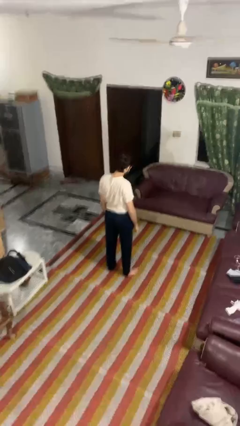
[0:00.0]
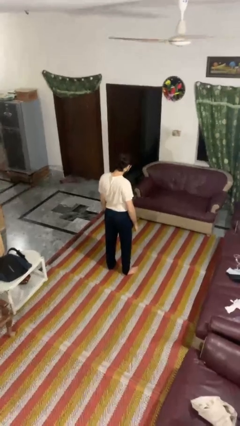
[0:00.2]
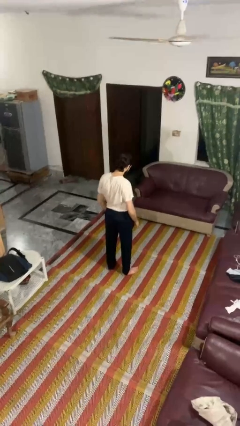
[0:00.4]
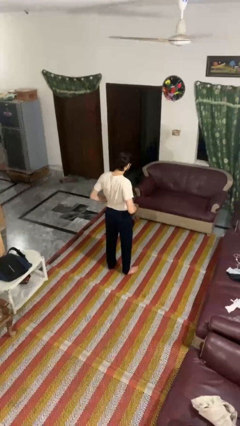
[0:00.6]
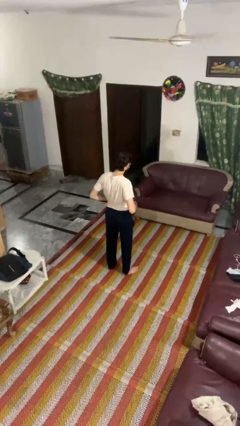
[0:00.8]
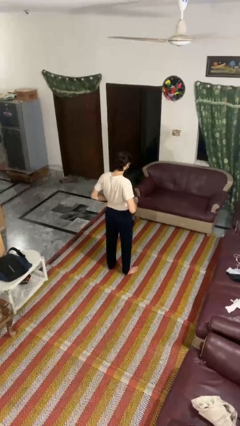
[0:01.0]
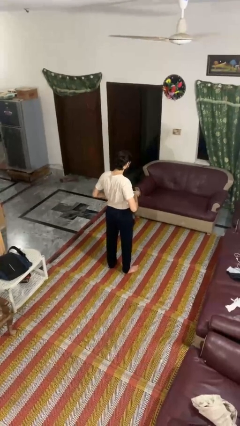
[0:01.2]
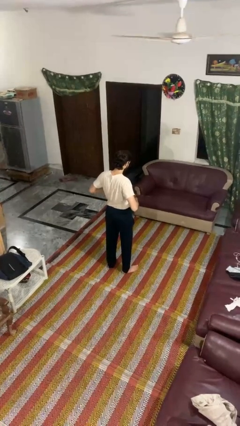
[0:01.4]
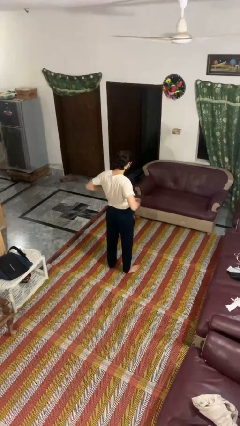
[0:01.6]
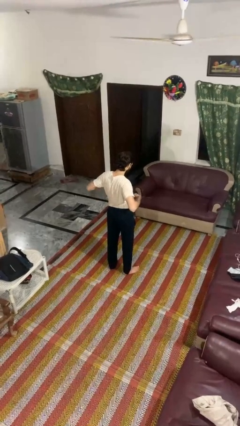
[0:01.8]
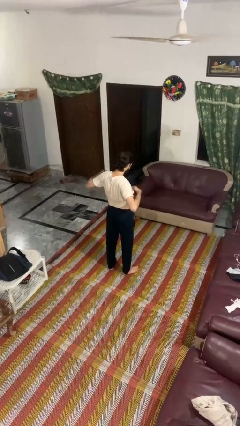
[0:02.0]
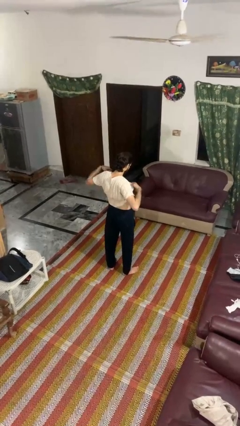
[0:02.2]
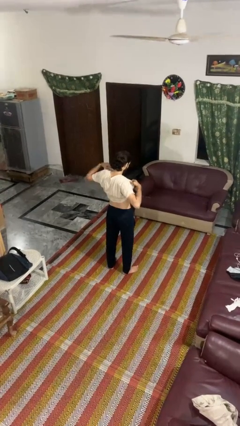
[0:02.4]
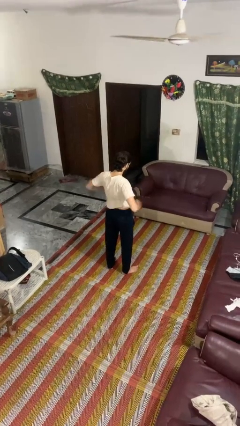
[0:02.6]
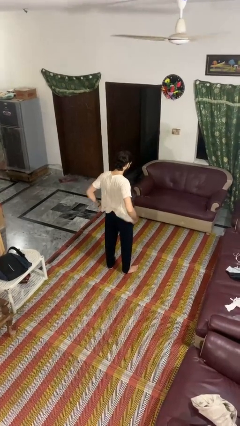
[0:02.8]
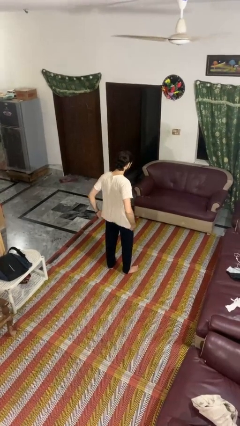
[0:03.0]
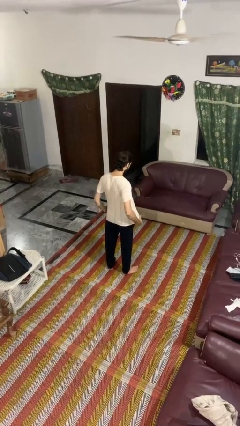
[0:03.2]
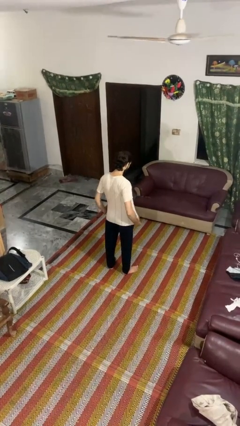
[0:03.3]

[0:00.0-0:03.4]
person untucks shirt

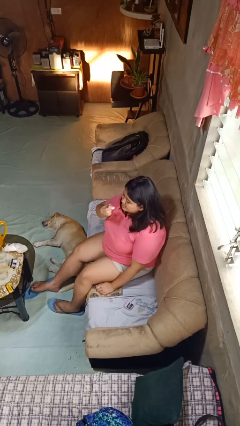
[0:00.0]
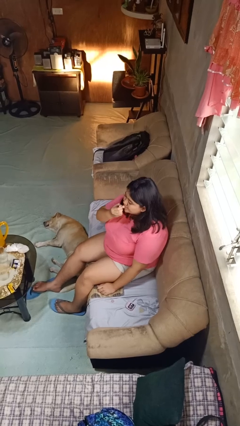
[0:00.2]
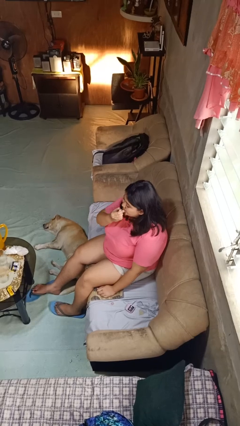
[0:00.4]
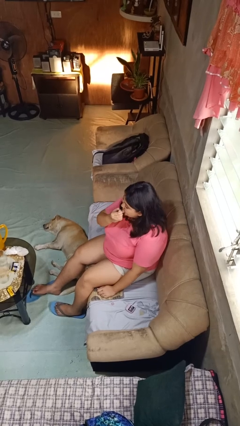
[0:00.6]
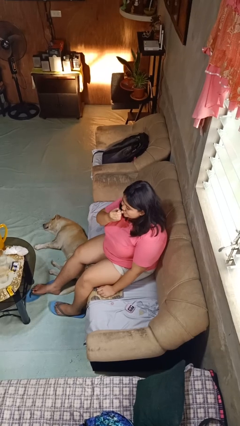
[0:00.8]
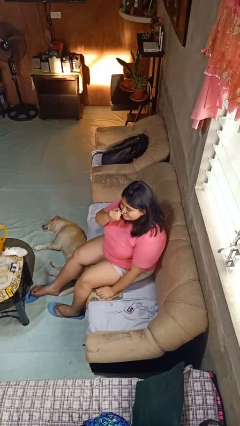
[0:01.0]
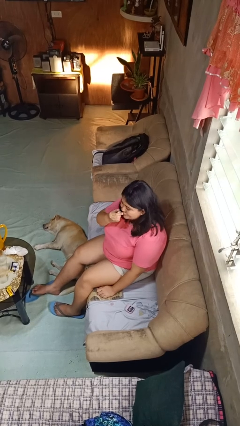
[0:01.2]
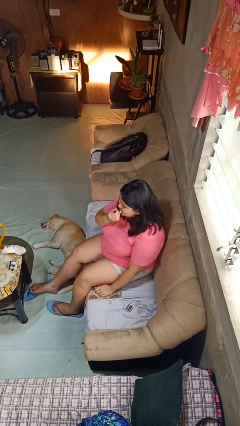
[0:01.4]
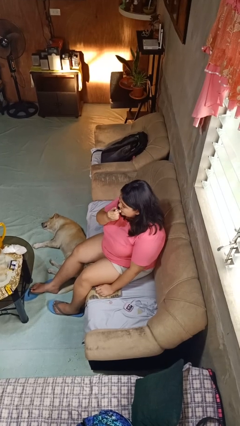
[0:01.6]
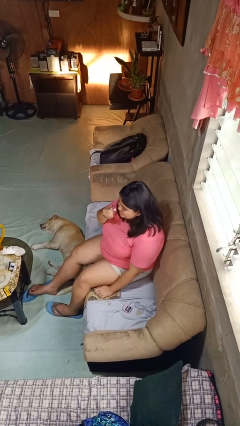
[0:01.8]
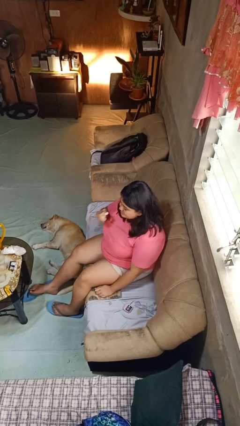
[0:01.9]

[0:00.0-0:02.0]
person applies lip makeup

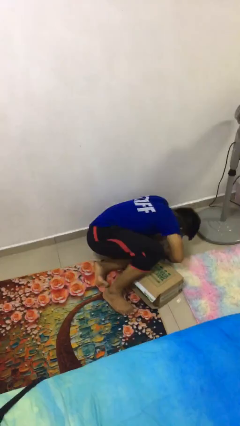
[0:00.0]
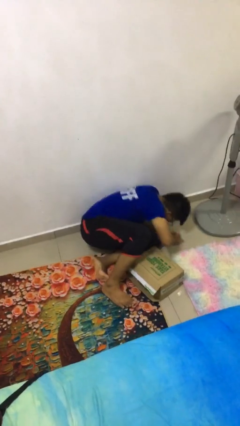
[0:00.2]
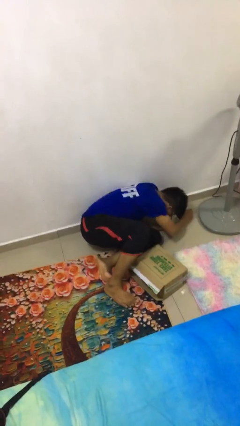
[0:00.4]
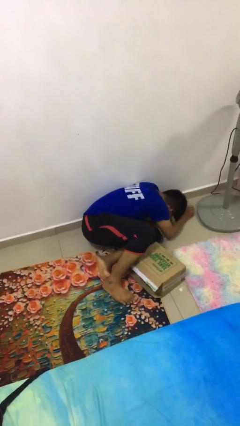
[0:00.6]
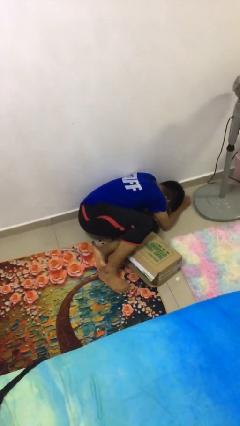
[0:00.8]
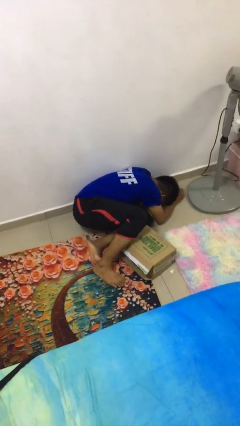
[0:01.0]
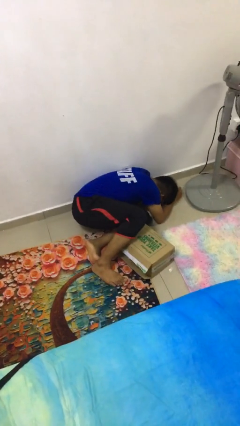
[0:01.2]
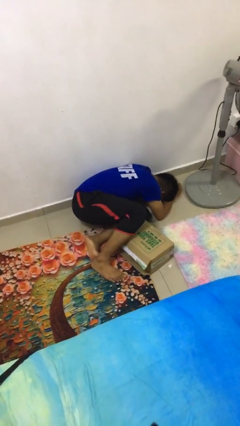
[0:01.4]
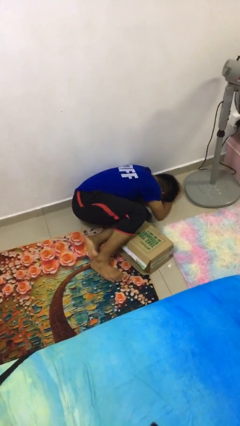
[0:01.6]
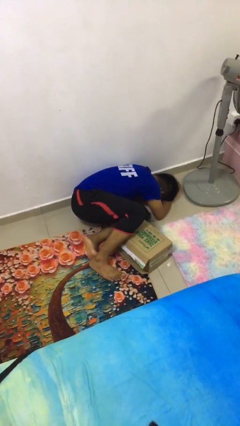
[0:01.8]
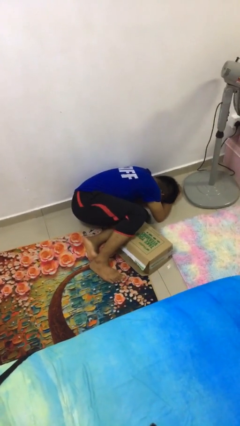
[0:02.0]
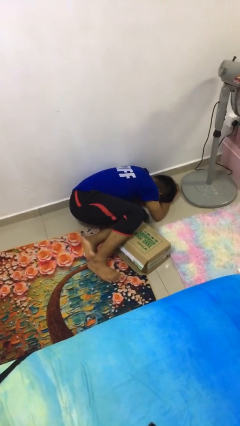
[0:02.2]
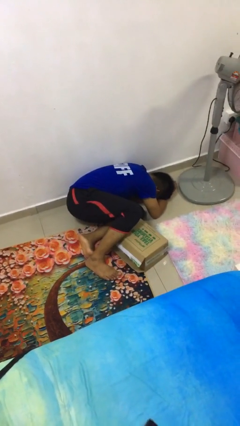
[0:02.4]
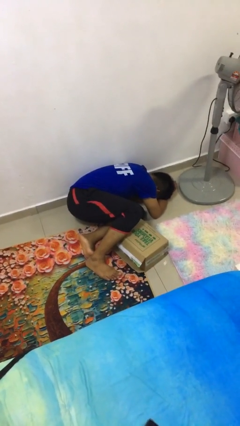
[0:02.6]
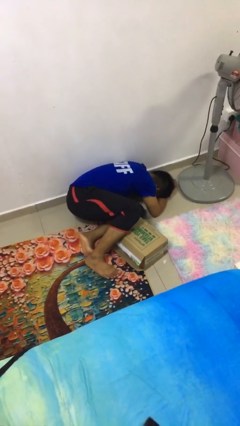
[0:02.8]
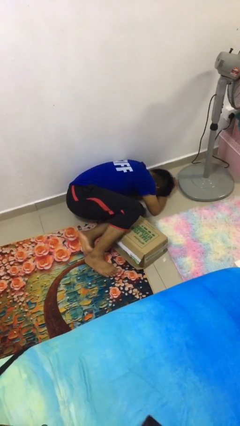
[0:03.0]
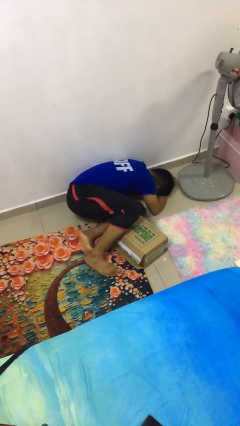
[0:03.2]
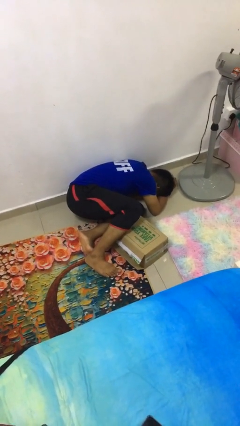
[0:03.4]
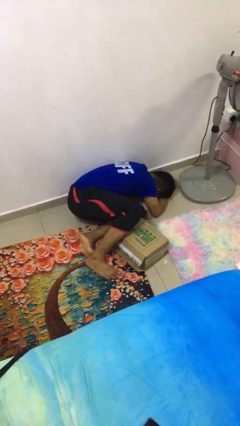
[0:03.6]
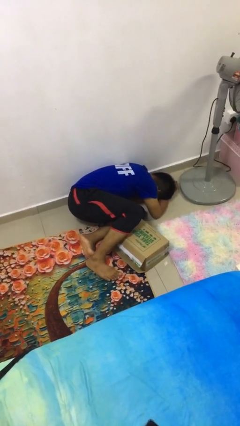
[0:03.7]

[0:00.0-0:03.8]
person lies down on floor

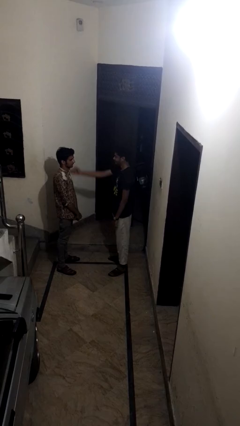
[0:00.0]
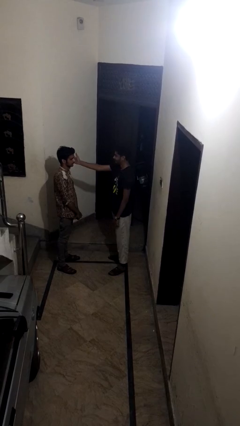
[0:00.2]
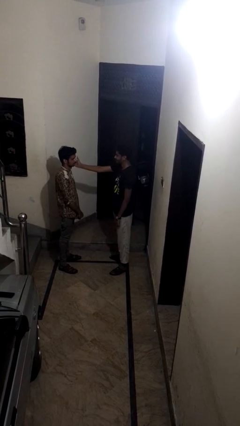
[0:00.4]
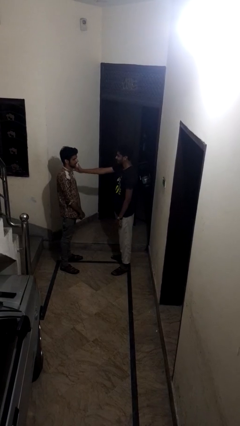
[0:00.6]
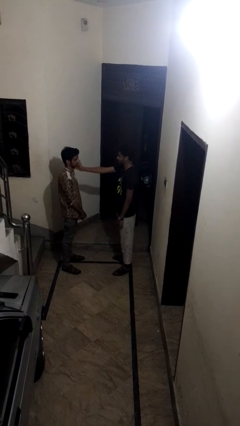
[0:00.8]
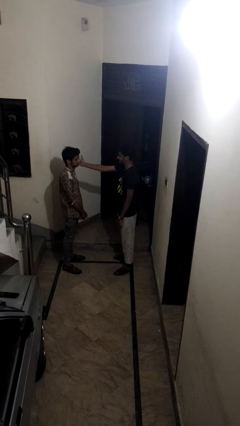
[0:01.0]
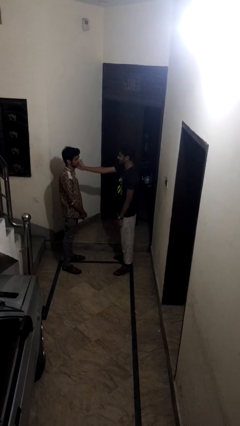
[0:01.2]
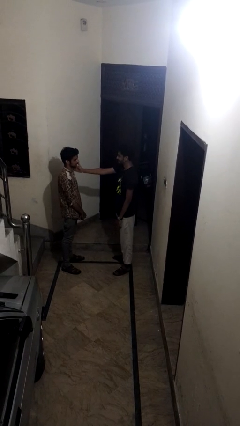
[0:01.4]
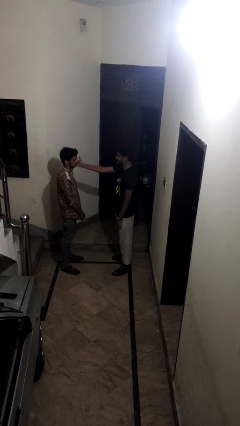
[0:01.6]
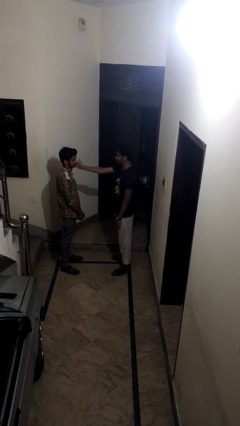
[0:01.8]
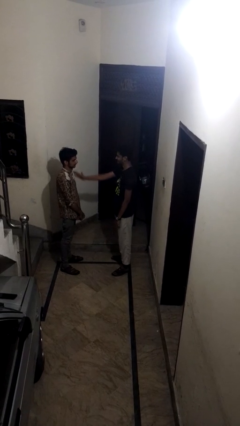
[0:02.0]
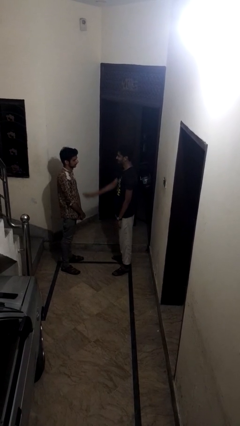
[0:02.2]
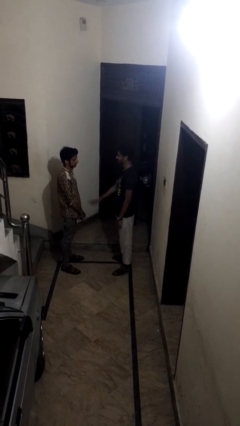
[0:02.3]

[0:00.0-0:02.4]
person touches face of person

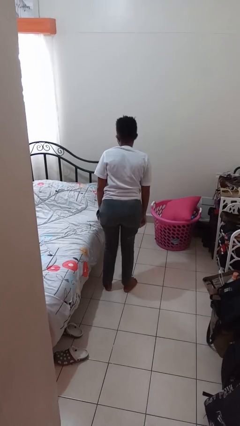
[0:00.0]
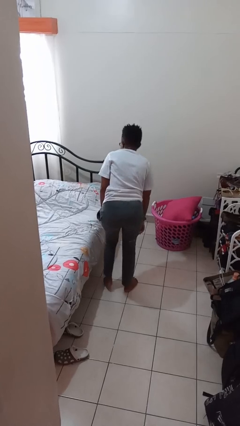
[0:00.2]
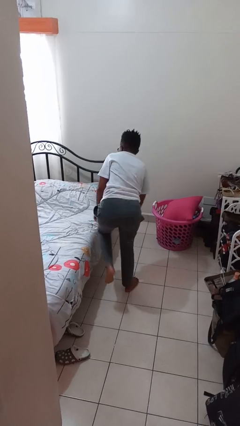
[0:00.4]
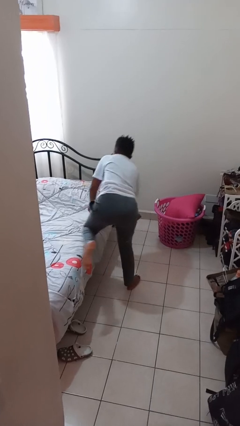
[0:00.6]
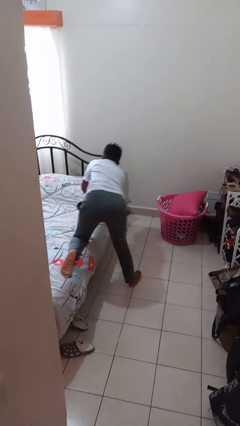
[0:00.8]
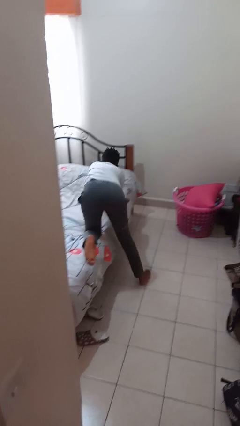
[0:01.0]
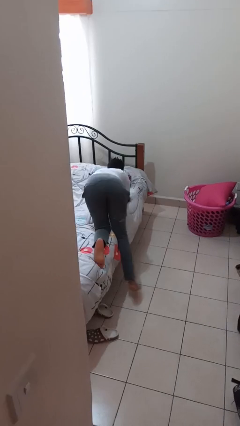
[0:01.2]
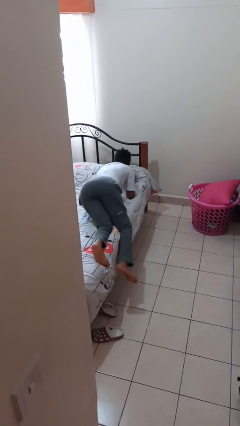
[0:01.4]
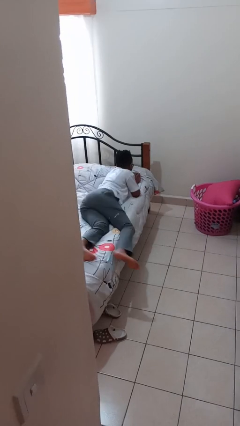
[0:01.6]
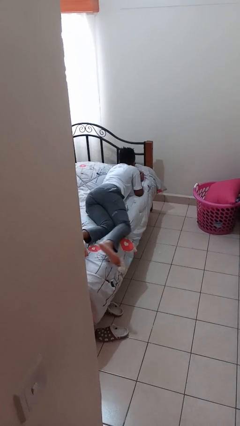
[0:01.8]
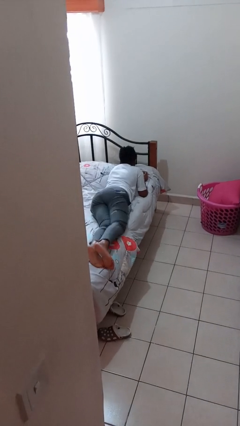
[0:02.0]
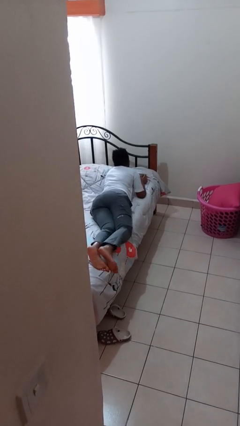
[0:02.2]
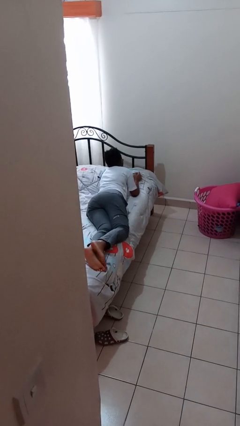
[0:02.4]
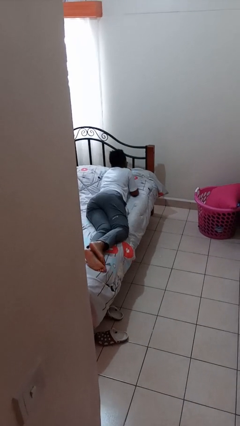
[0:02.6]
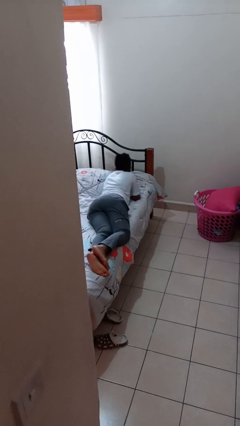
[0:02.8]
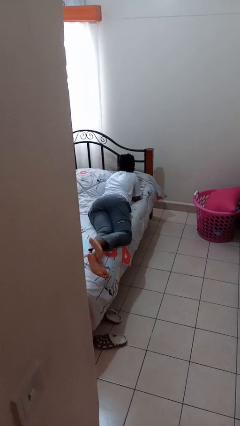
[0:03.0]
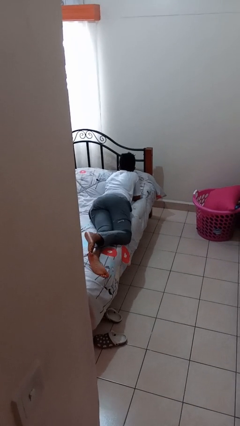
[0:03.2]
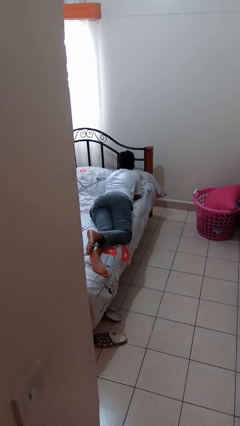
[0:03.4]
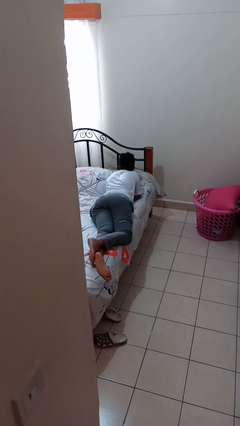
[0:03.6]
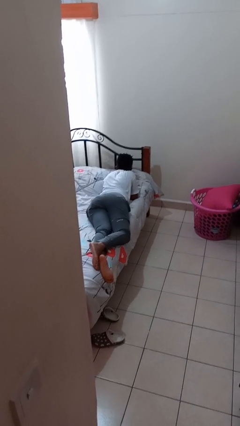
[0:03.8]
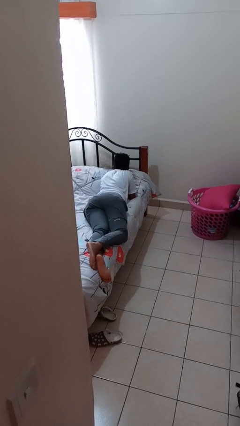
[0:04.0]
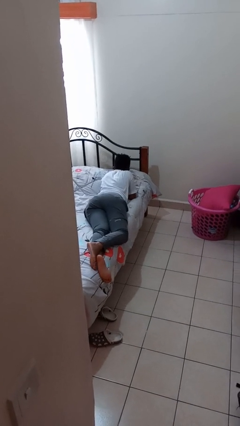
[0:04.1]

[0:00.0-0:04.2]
person lies down on bed

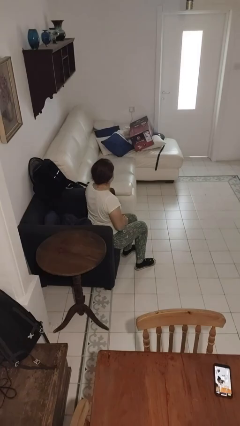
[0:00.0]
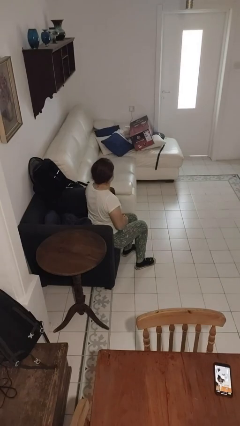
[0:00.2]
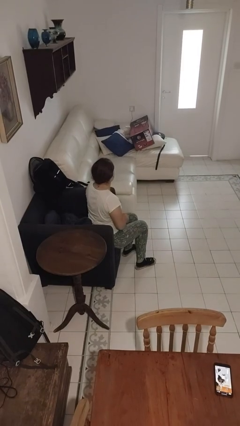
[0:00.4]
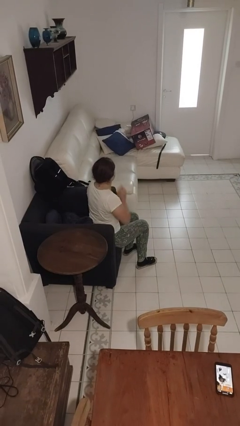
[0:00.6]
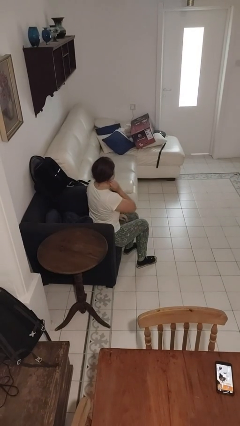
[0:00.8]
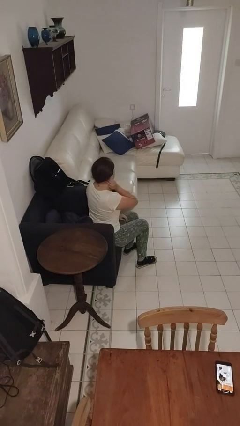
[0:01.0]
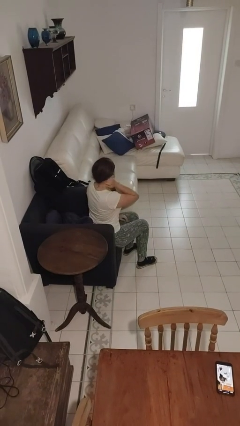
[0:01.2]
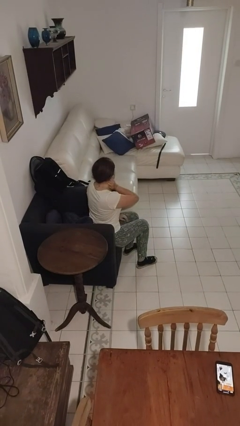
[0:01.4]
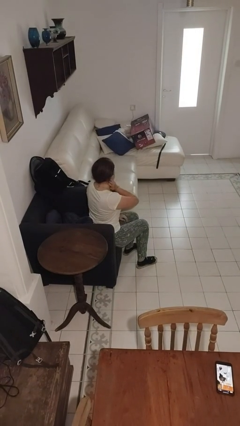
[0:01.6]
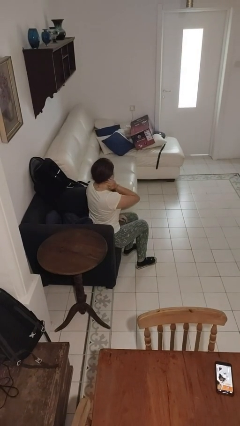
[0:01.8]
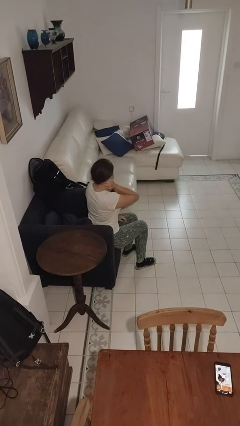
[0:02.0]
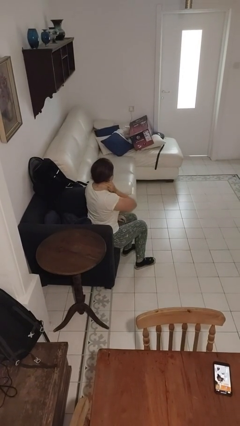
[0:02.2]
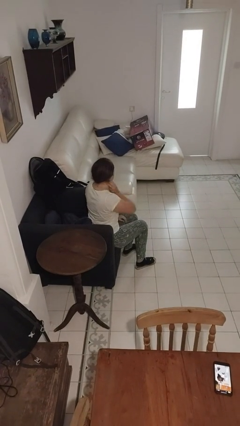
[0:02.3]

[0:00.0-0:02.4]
person rubs neck
